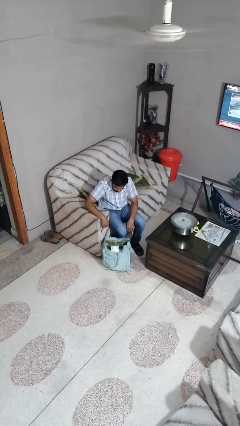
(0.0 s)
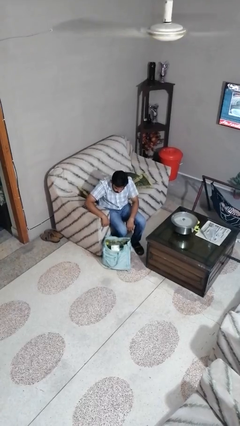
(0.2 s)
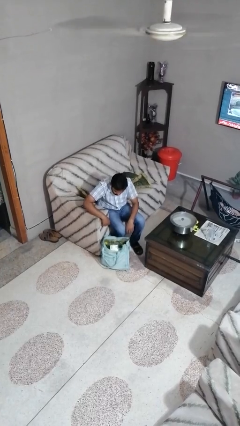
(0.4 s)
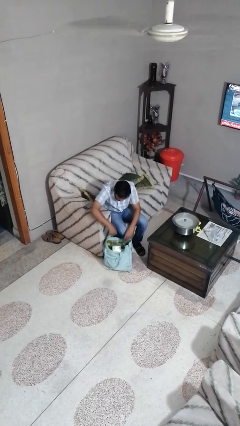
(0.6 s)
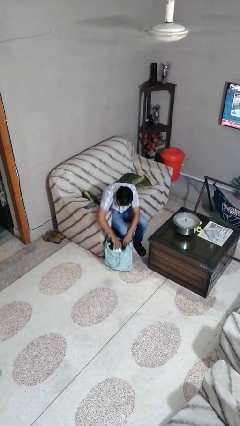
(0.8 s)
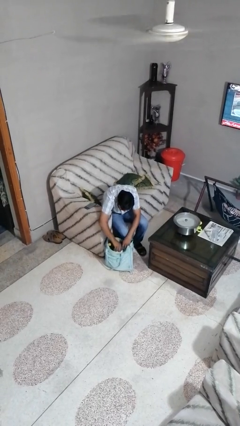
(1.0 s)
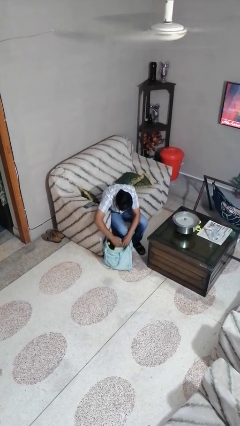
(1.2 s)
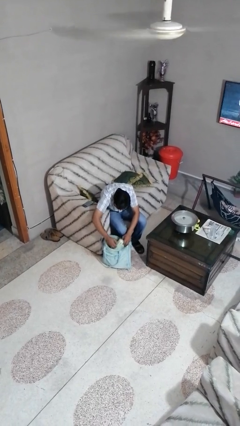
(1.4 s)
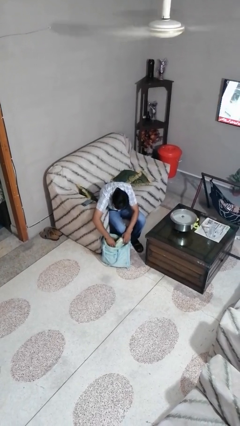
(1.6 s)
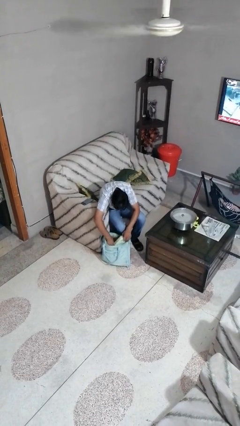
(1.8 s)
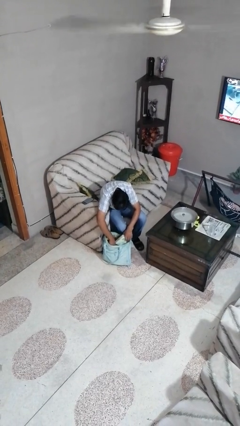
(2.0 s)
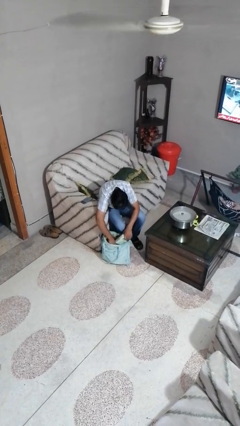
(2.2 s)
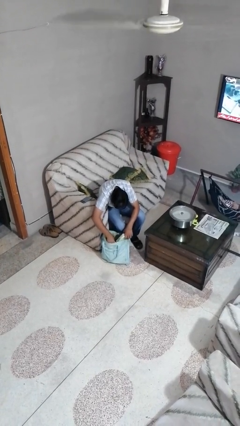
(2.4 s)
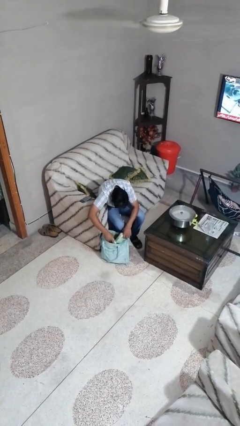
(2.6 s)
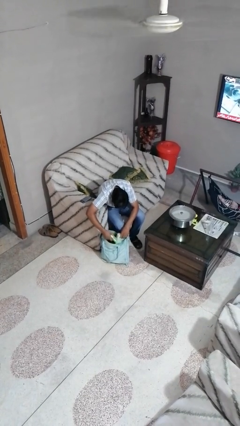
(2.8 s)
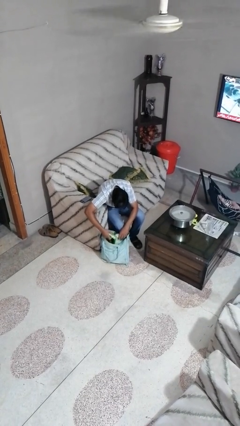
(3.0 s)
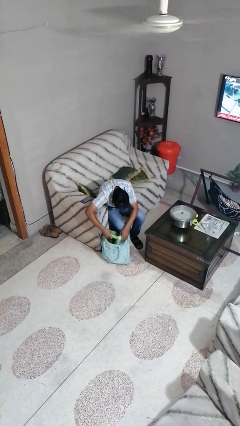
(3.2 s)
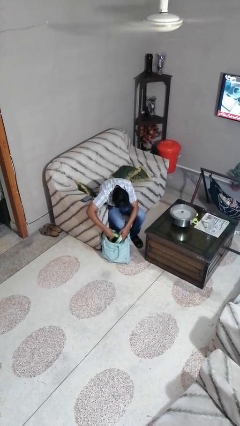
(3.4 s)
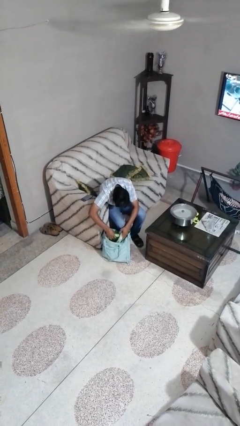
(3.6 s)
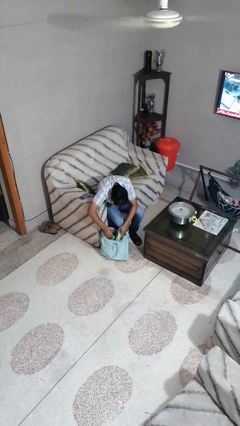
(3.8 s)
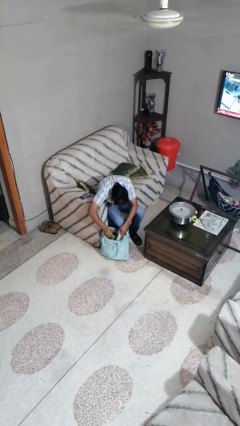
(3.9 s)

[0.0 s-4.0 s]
person searches in bag

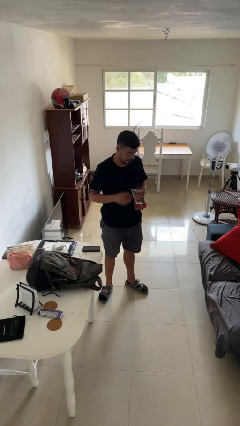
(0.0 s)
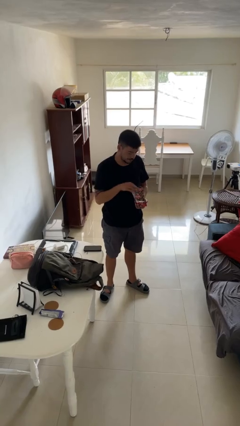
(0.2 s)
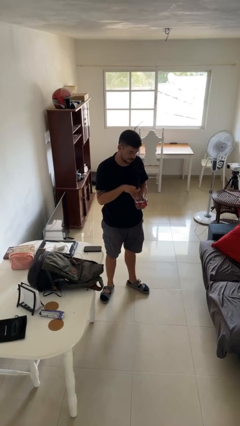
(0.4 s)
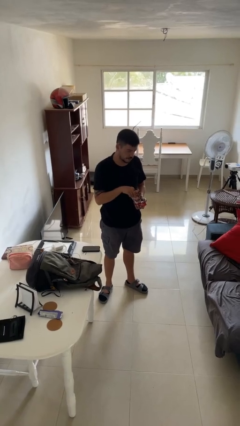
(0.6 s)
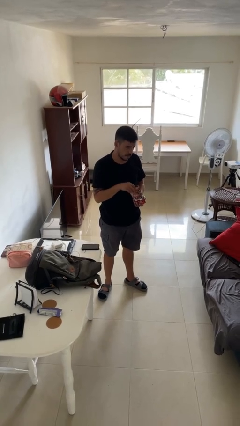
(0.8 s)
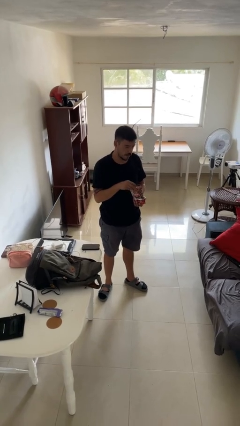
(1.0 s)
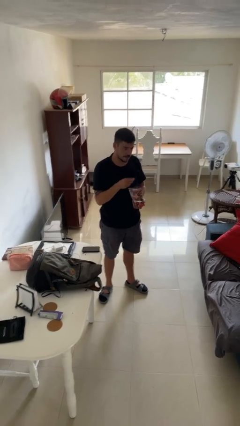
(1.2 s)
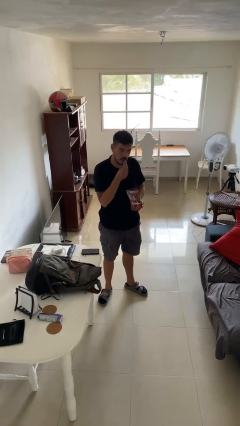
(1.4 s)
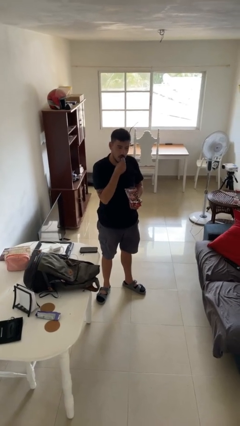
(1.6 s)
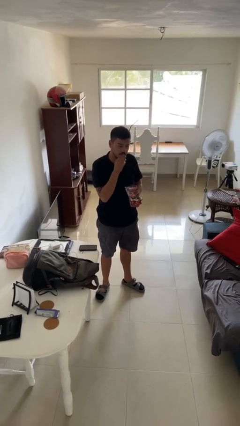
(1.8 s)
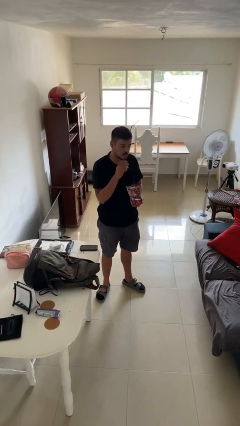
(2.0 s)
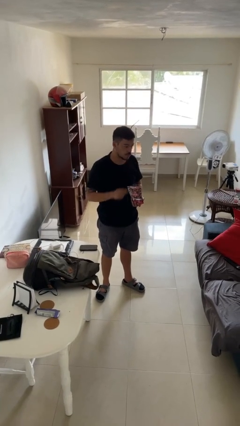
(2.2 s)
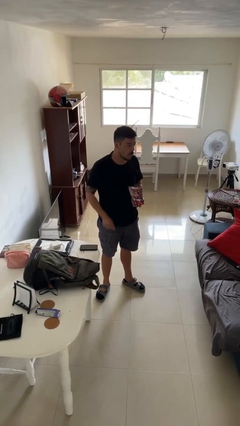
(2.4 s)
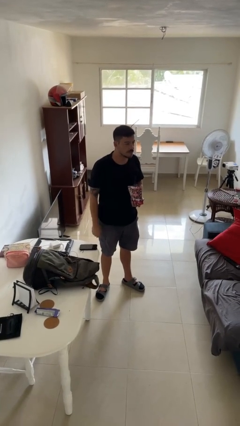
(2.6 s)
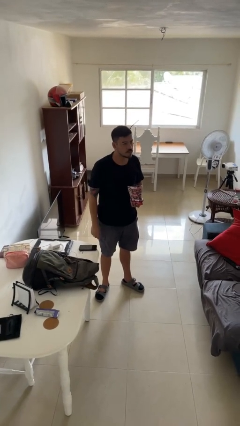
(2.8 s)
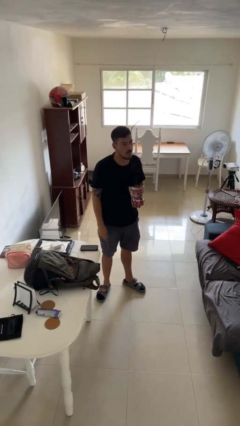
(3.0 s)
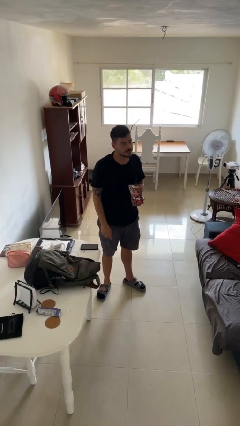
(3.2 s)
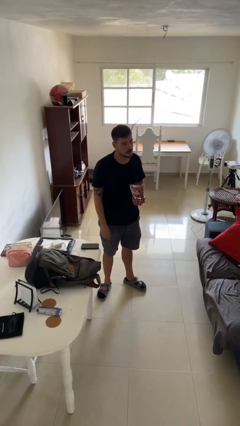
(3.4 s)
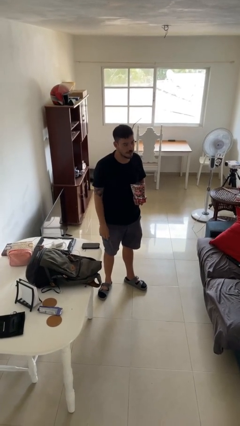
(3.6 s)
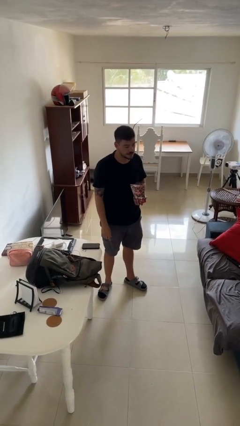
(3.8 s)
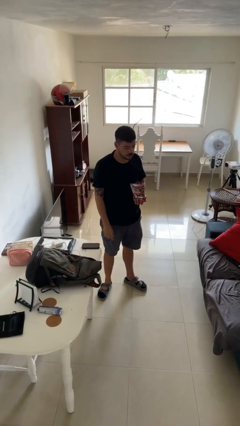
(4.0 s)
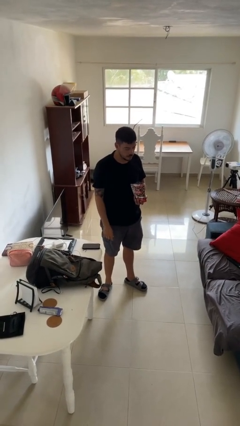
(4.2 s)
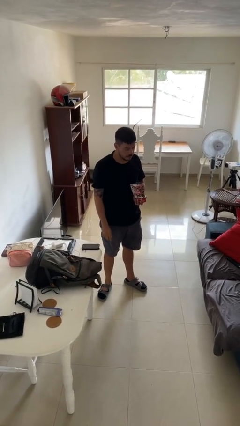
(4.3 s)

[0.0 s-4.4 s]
person eats snack from bag

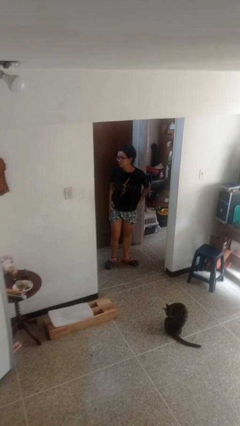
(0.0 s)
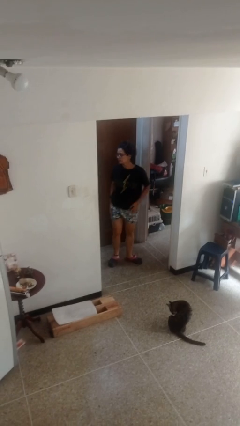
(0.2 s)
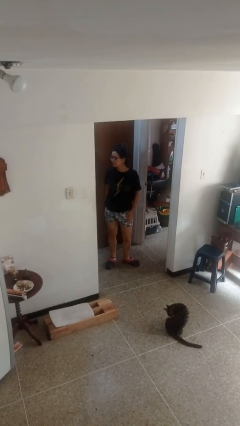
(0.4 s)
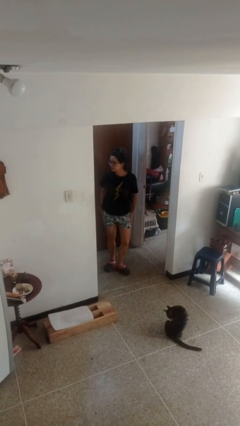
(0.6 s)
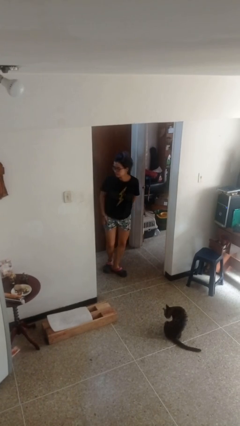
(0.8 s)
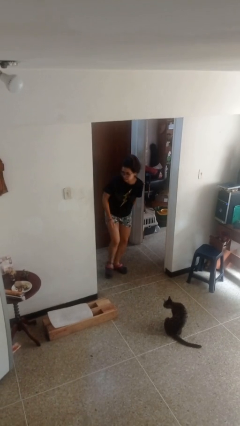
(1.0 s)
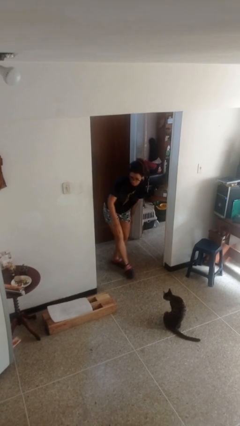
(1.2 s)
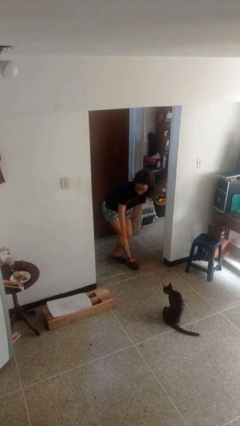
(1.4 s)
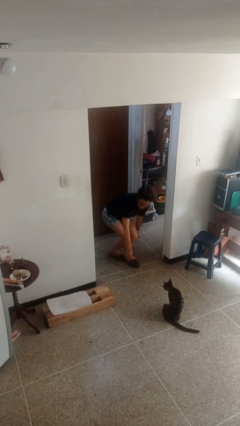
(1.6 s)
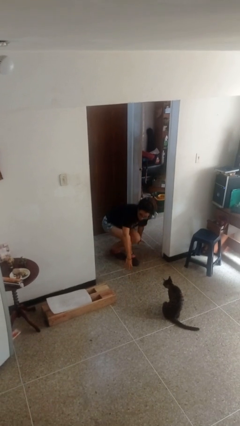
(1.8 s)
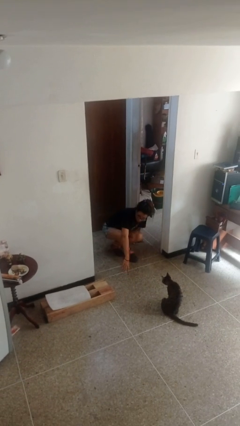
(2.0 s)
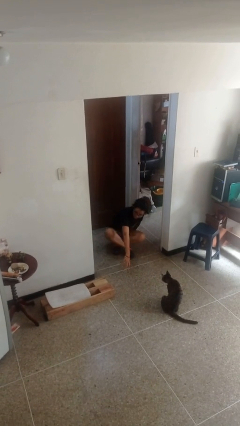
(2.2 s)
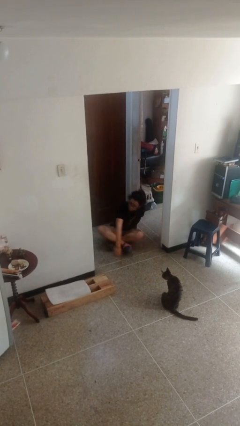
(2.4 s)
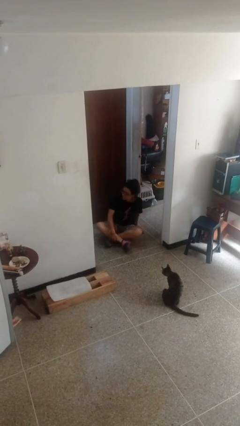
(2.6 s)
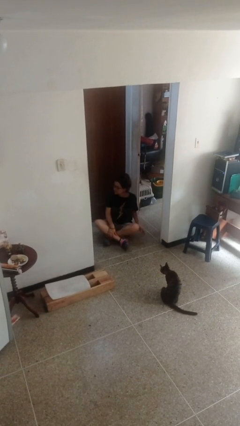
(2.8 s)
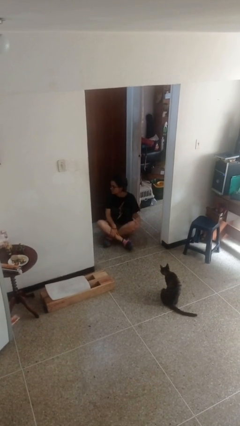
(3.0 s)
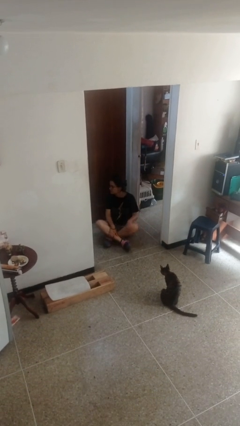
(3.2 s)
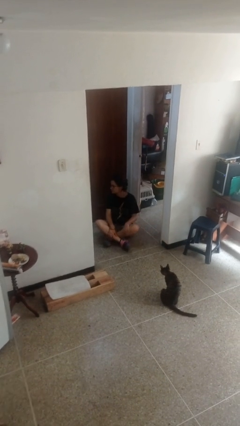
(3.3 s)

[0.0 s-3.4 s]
person sits crisscross

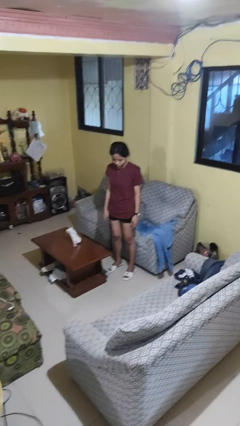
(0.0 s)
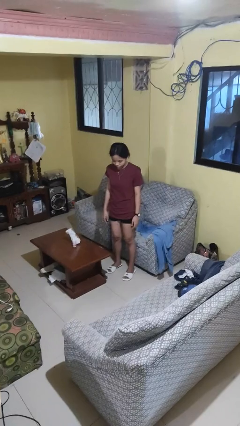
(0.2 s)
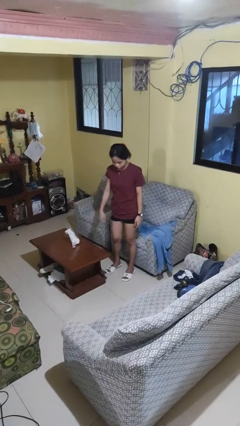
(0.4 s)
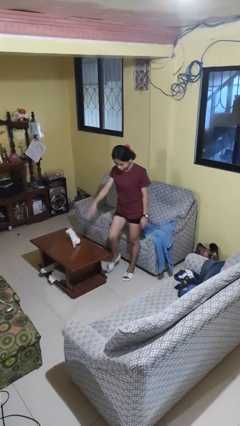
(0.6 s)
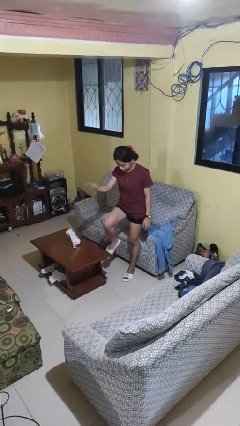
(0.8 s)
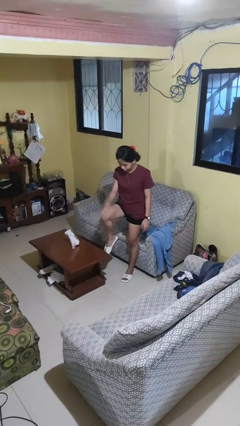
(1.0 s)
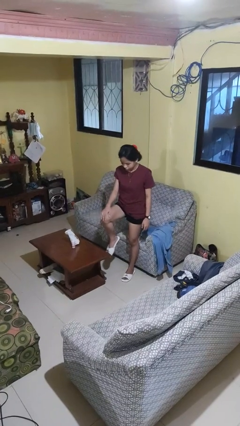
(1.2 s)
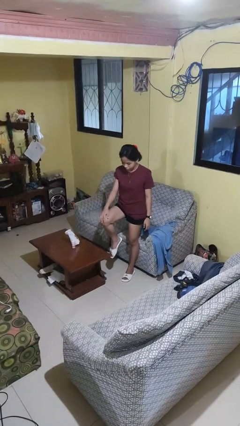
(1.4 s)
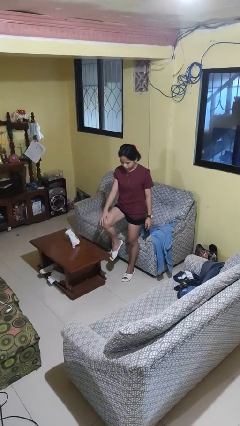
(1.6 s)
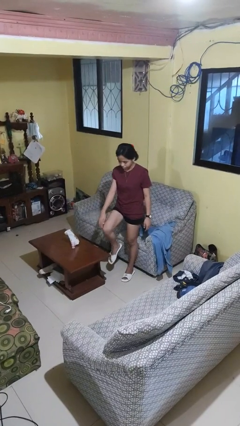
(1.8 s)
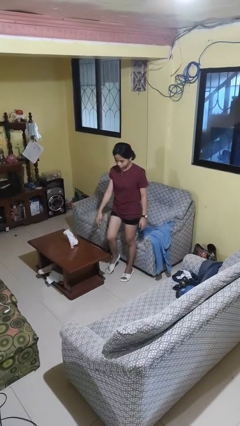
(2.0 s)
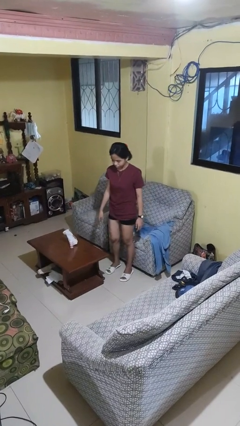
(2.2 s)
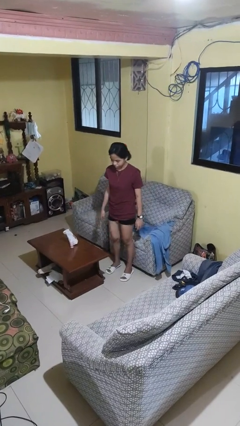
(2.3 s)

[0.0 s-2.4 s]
person swats bug

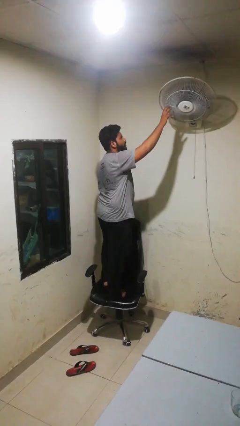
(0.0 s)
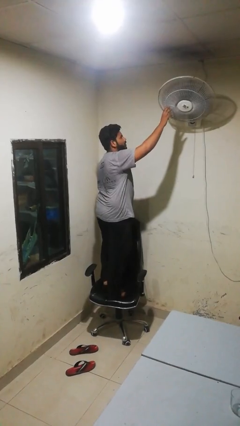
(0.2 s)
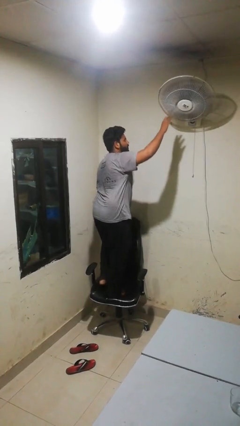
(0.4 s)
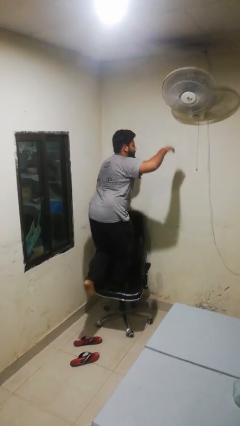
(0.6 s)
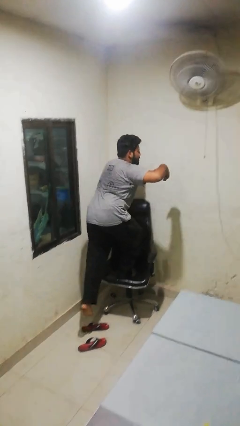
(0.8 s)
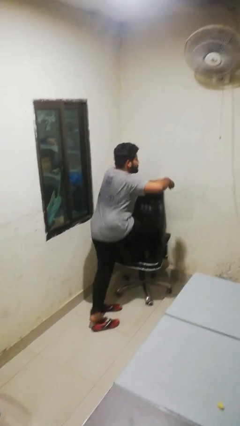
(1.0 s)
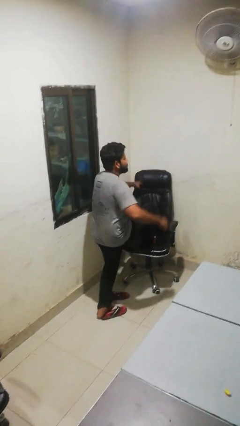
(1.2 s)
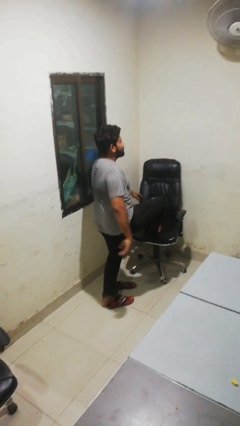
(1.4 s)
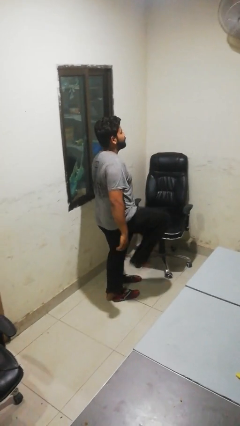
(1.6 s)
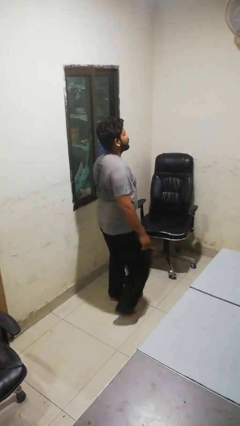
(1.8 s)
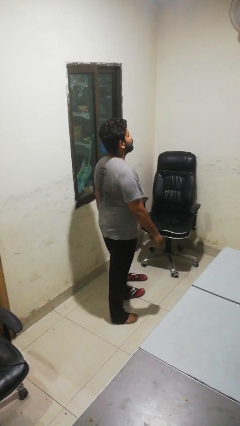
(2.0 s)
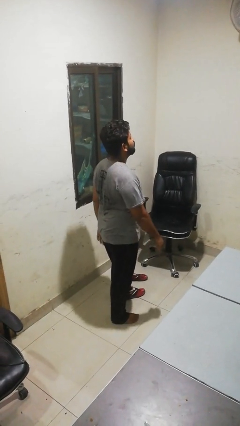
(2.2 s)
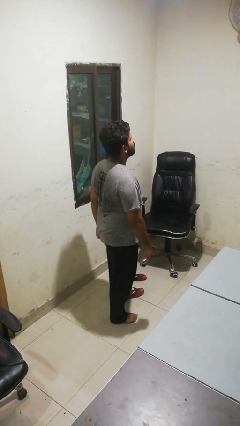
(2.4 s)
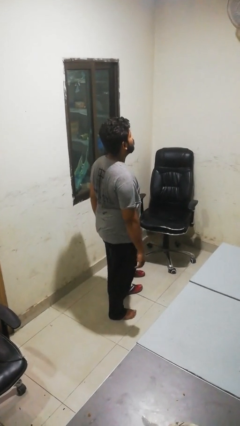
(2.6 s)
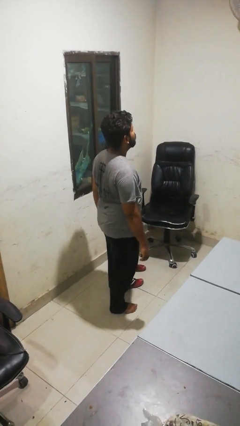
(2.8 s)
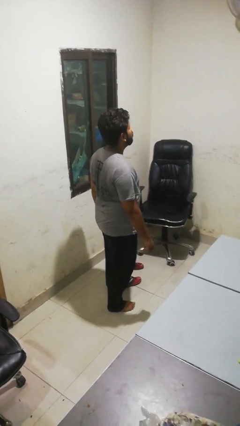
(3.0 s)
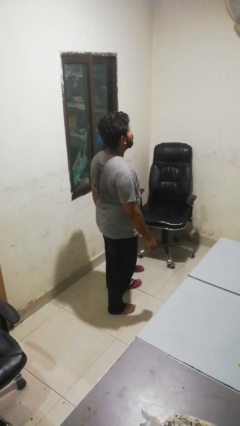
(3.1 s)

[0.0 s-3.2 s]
person climbs off chair
